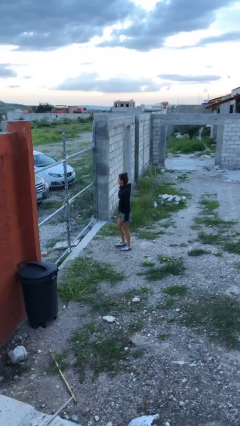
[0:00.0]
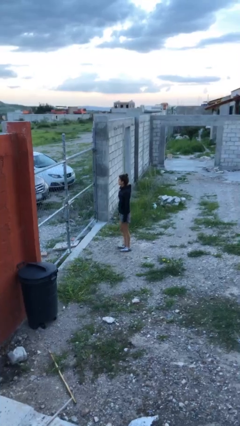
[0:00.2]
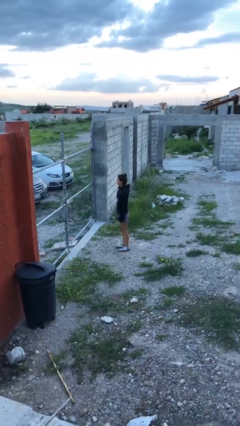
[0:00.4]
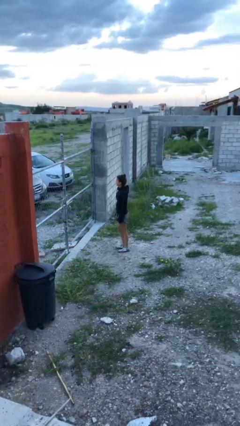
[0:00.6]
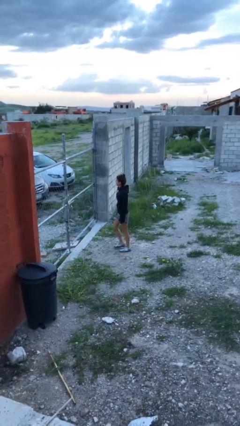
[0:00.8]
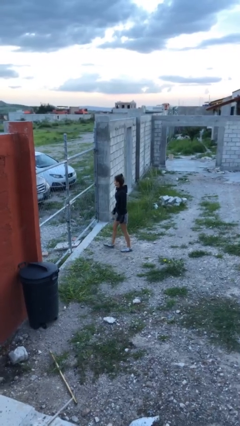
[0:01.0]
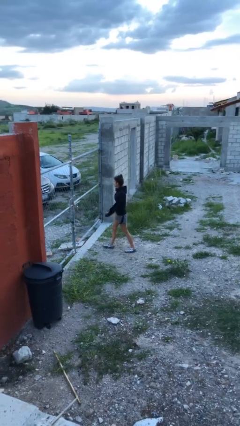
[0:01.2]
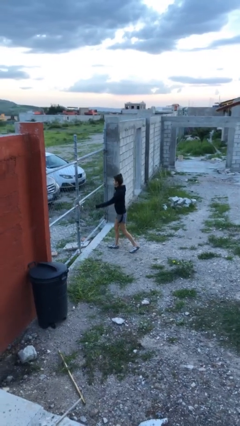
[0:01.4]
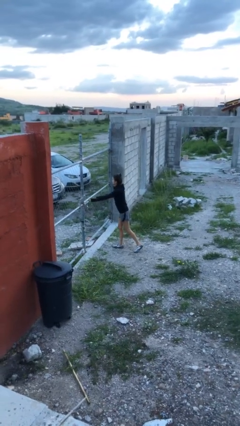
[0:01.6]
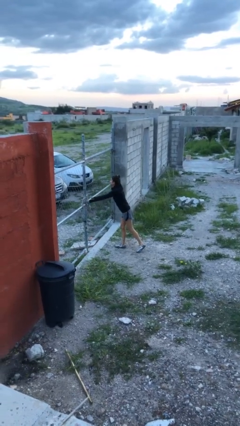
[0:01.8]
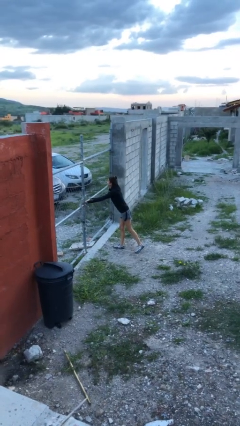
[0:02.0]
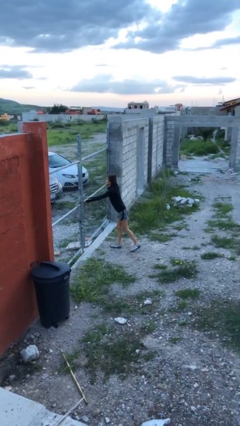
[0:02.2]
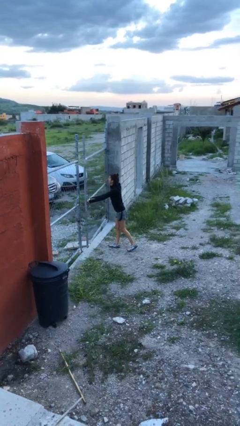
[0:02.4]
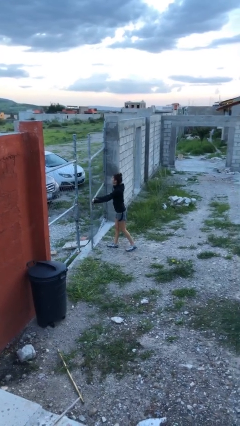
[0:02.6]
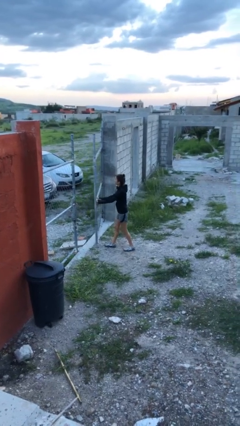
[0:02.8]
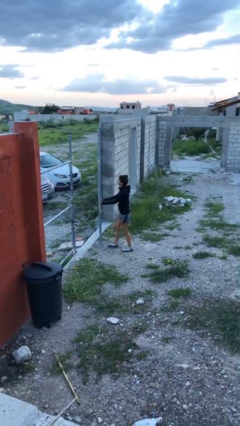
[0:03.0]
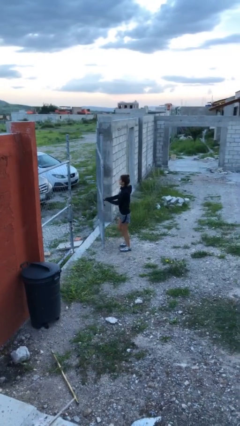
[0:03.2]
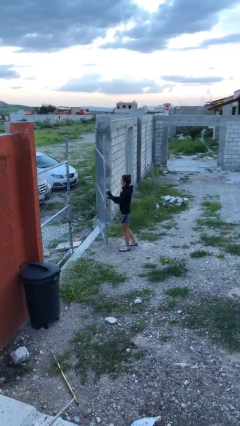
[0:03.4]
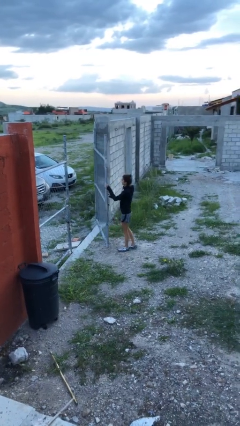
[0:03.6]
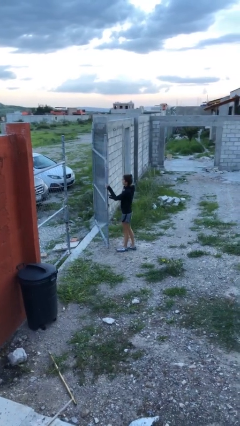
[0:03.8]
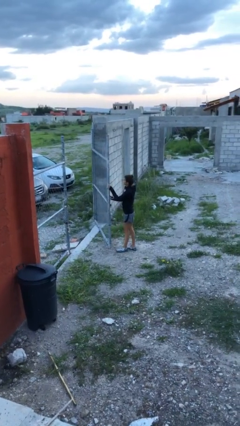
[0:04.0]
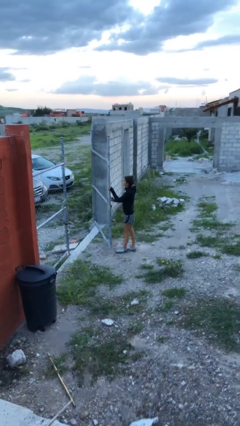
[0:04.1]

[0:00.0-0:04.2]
person opens gate

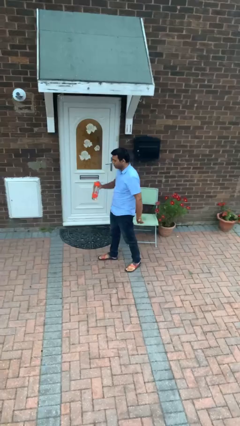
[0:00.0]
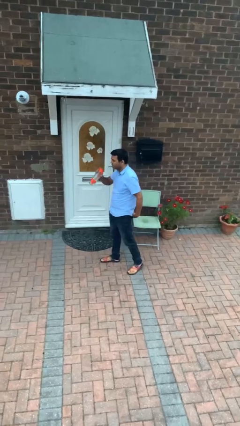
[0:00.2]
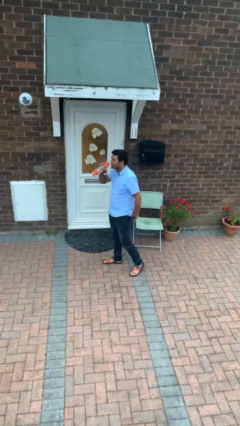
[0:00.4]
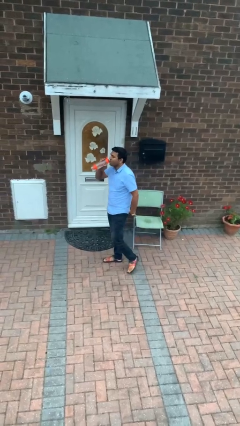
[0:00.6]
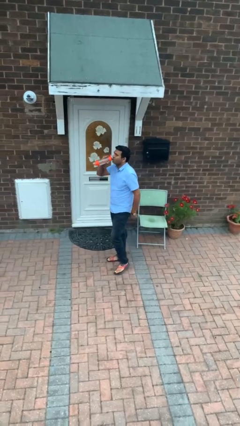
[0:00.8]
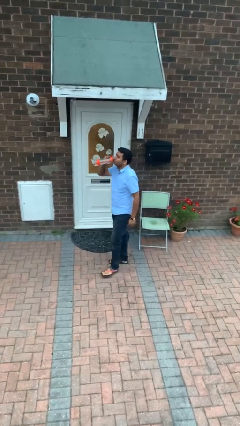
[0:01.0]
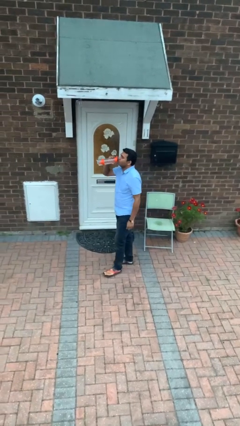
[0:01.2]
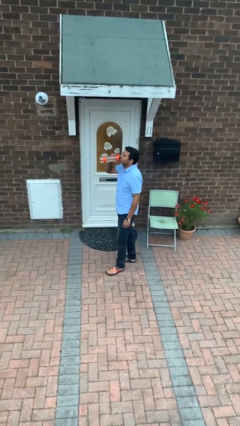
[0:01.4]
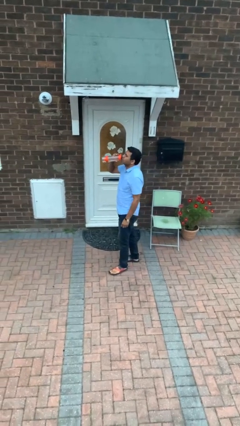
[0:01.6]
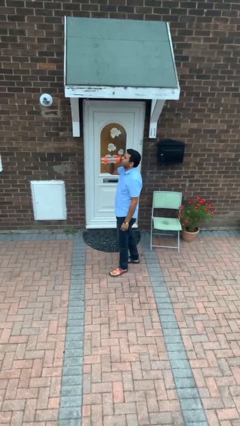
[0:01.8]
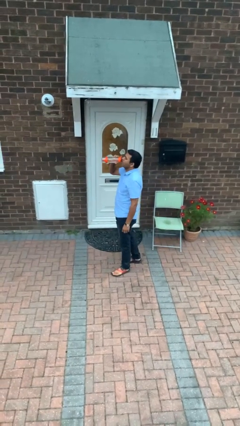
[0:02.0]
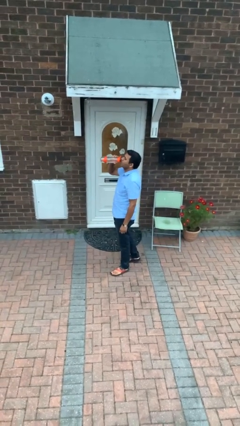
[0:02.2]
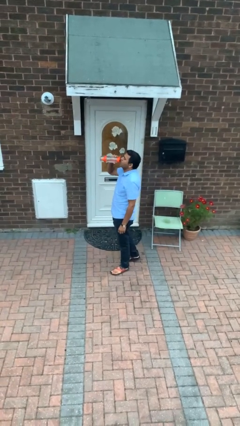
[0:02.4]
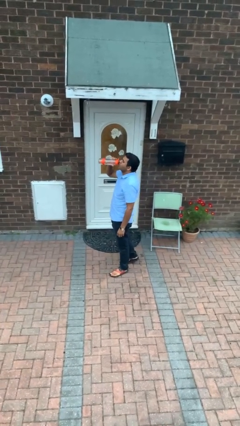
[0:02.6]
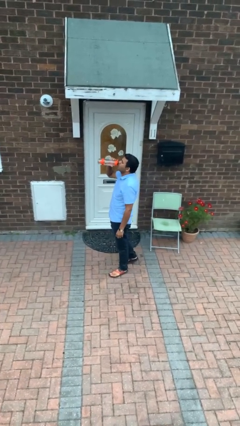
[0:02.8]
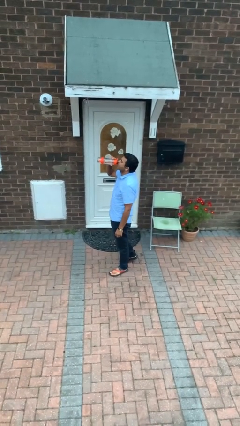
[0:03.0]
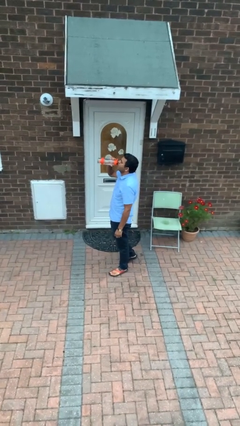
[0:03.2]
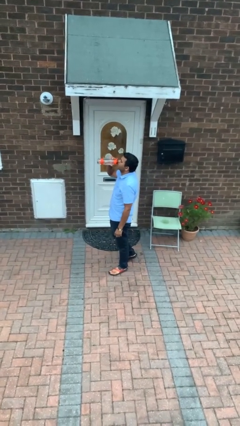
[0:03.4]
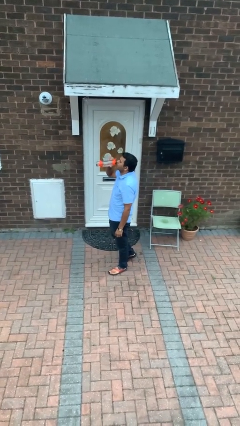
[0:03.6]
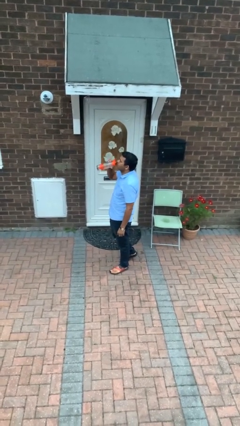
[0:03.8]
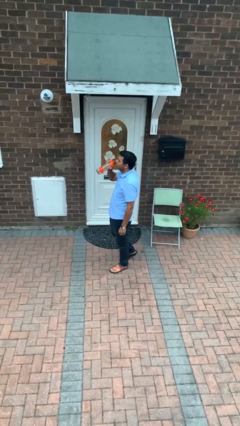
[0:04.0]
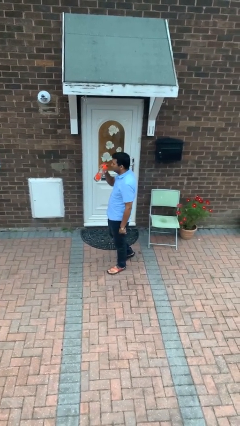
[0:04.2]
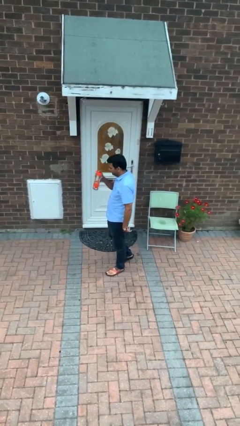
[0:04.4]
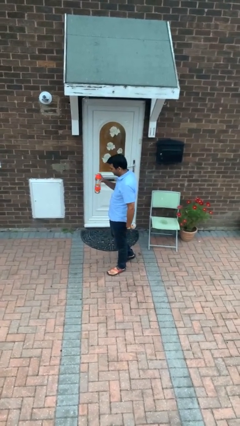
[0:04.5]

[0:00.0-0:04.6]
person drinks from bottle

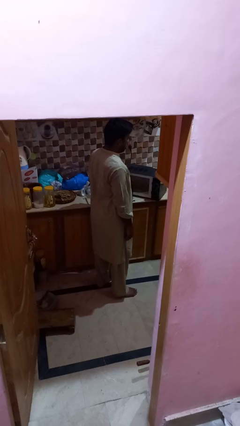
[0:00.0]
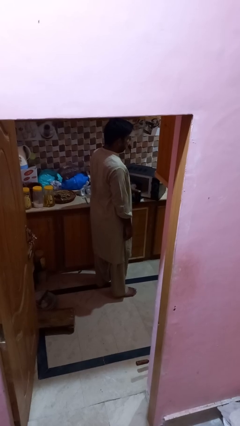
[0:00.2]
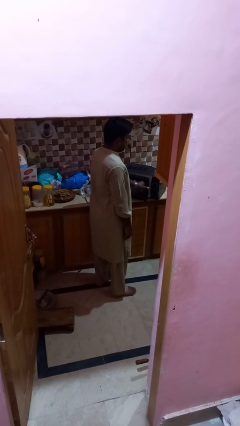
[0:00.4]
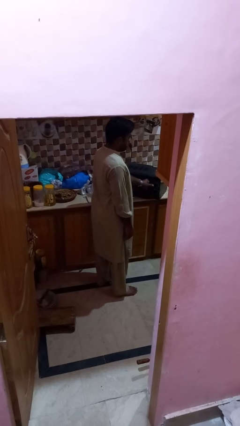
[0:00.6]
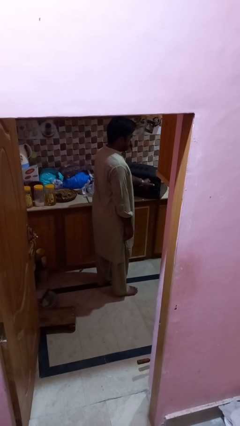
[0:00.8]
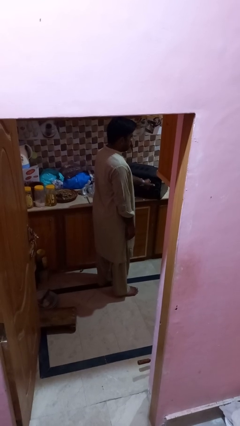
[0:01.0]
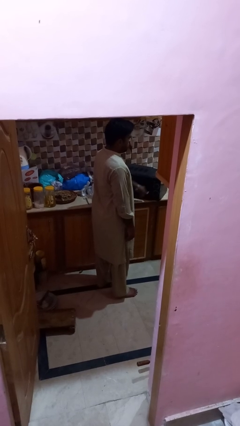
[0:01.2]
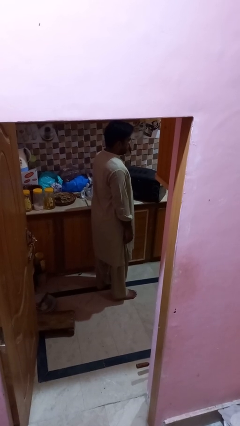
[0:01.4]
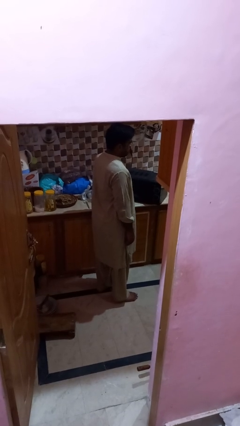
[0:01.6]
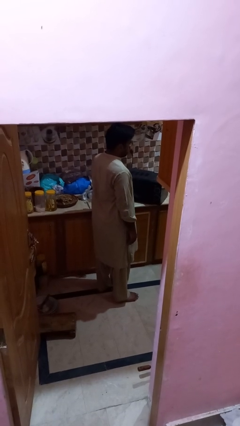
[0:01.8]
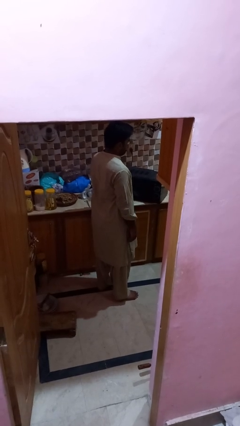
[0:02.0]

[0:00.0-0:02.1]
person closes microwave

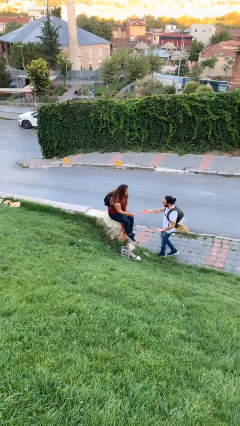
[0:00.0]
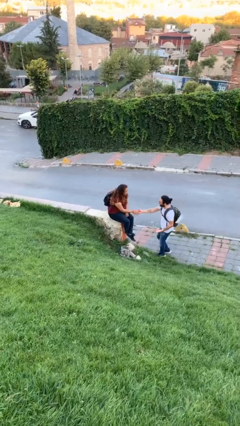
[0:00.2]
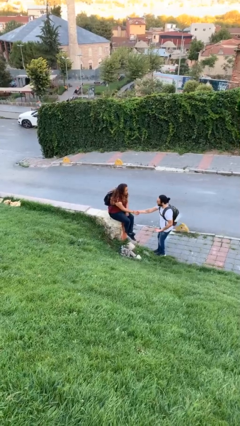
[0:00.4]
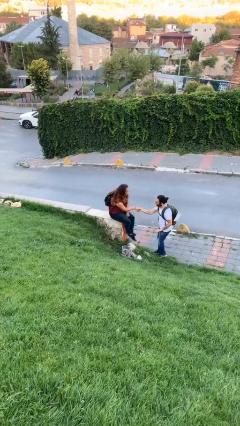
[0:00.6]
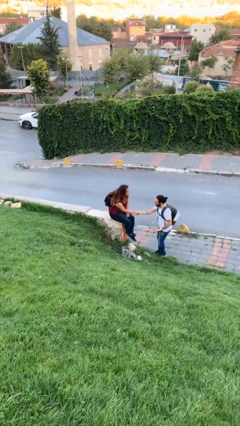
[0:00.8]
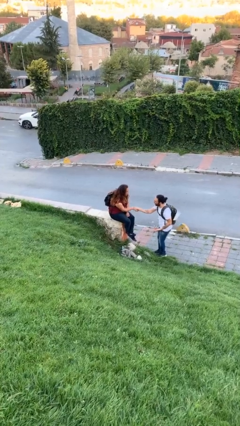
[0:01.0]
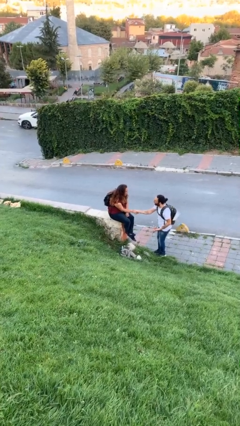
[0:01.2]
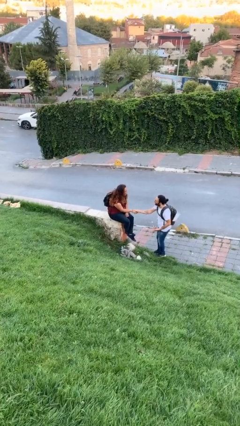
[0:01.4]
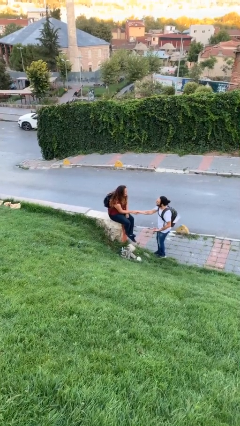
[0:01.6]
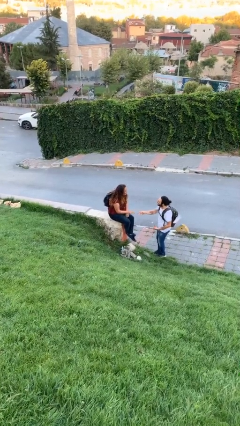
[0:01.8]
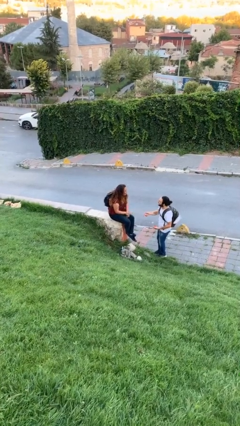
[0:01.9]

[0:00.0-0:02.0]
person shakes hand

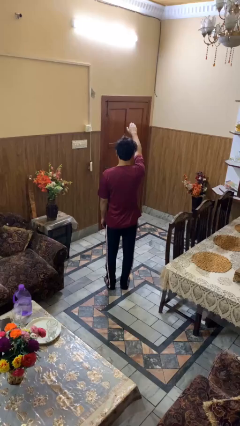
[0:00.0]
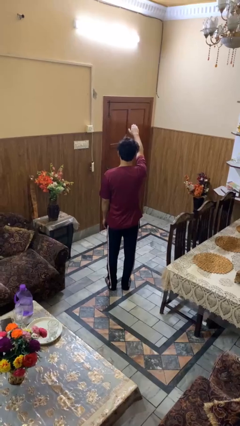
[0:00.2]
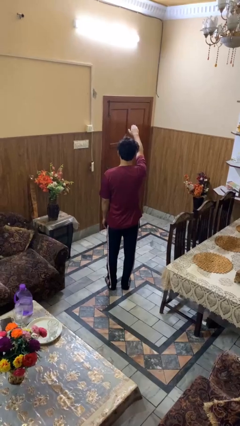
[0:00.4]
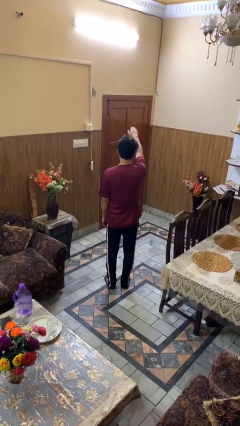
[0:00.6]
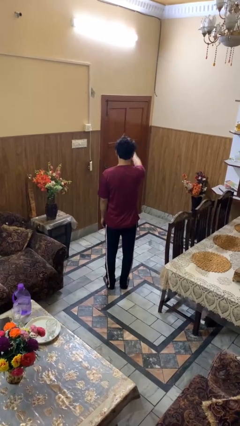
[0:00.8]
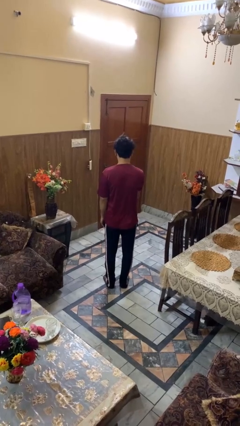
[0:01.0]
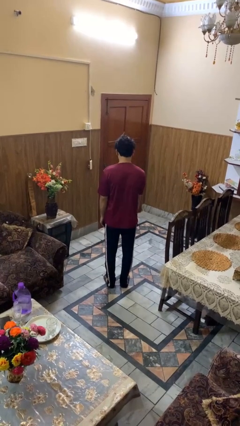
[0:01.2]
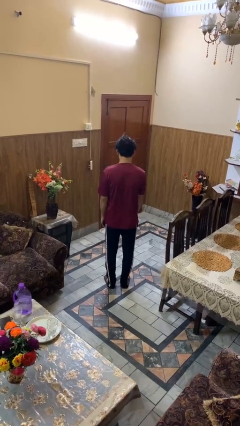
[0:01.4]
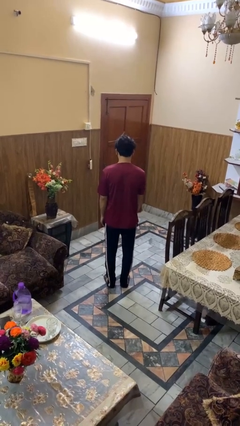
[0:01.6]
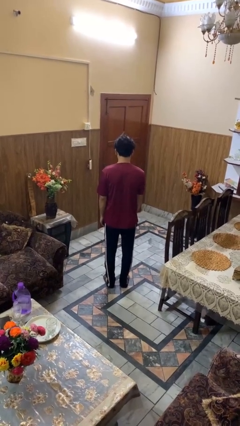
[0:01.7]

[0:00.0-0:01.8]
person gestures swipe down

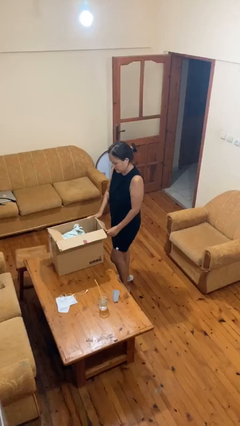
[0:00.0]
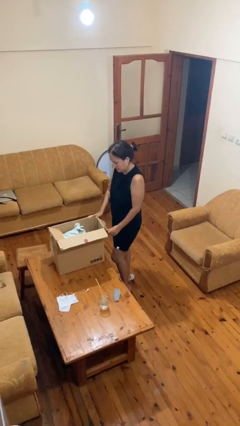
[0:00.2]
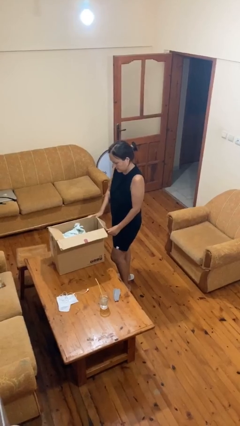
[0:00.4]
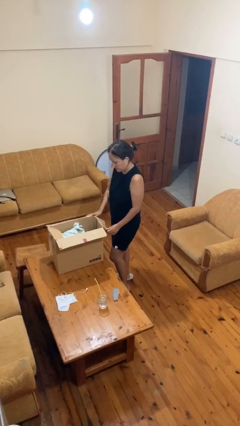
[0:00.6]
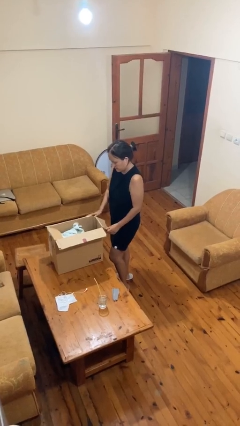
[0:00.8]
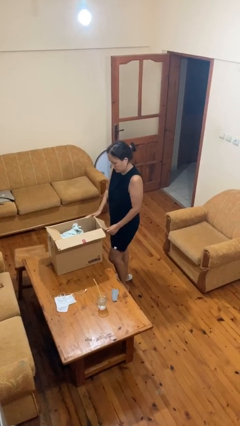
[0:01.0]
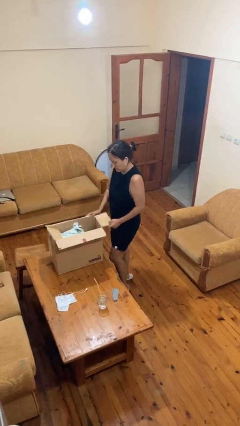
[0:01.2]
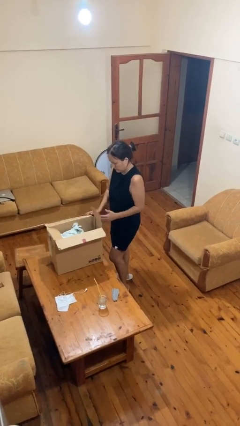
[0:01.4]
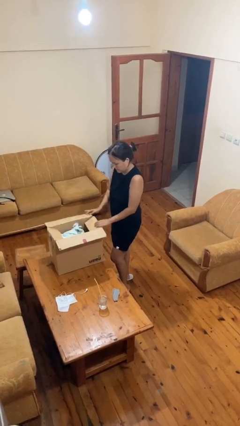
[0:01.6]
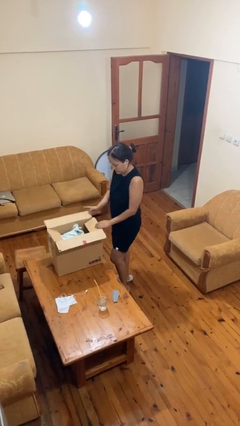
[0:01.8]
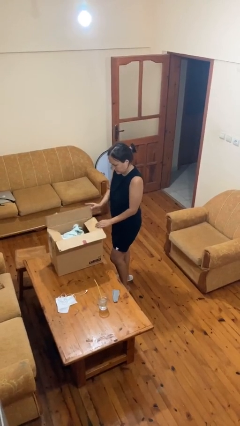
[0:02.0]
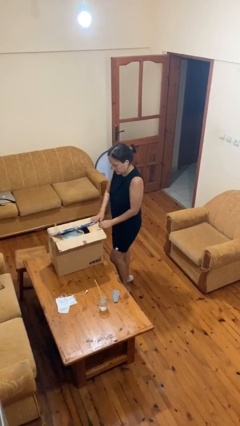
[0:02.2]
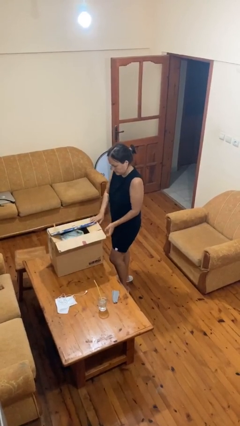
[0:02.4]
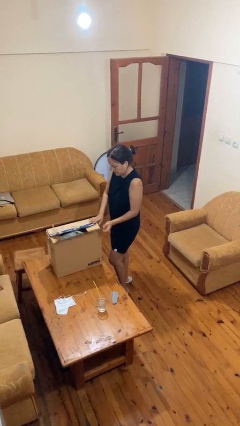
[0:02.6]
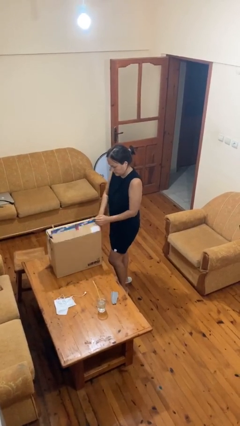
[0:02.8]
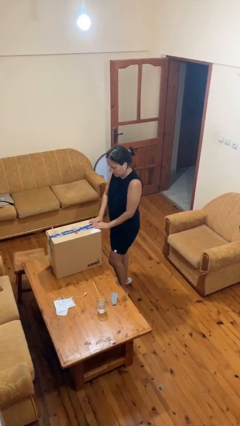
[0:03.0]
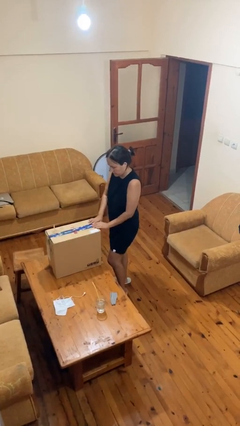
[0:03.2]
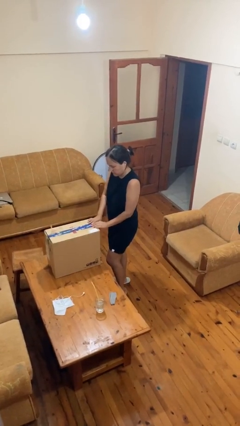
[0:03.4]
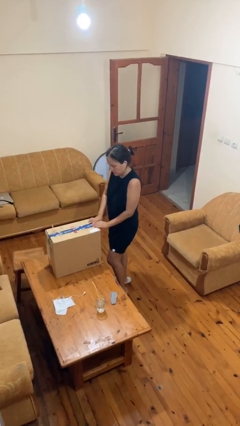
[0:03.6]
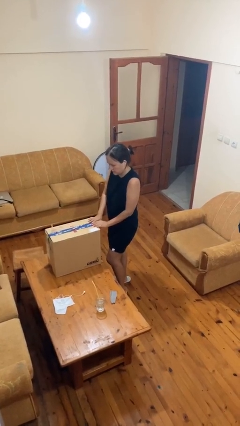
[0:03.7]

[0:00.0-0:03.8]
person closes box
